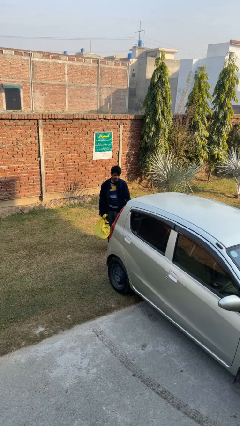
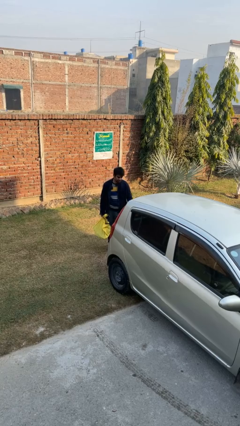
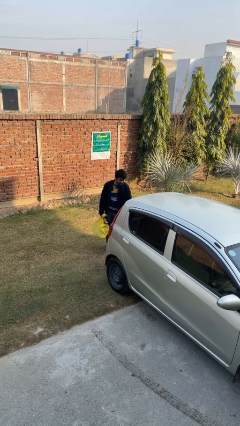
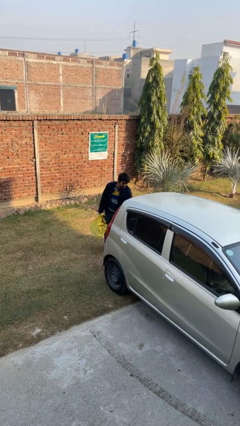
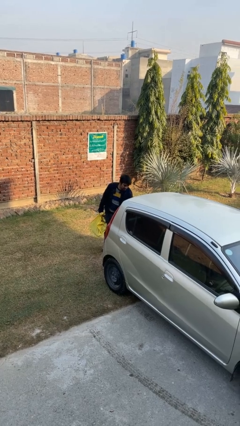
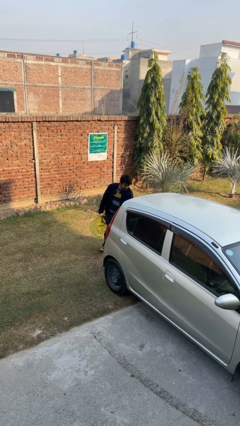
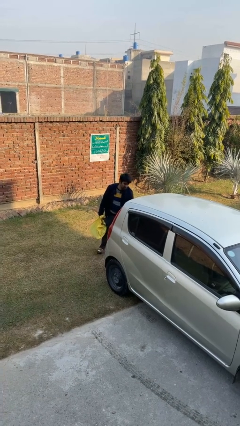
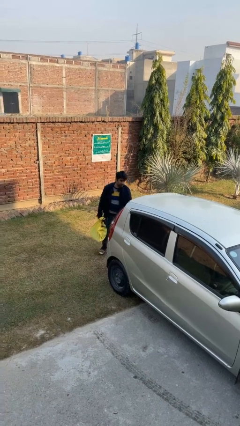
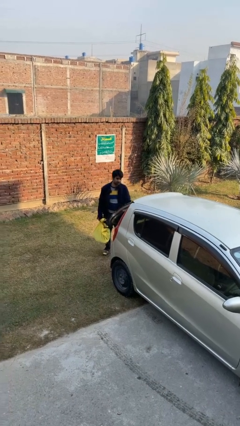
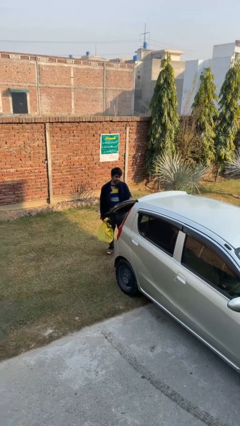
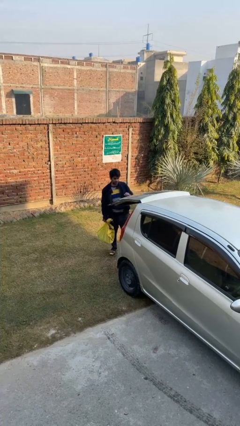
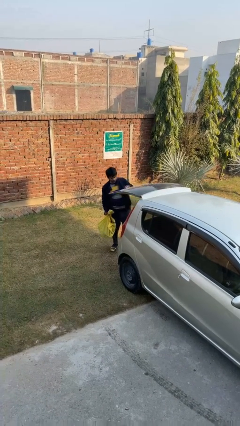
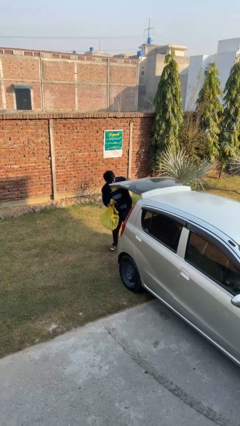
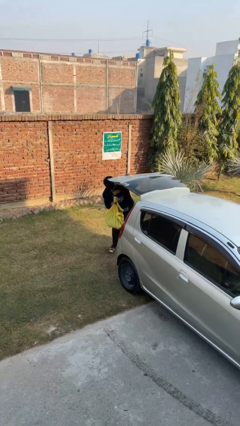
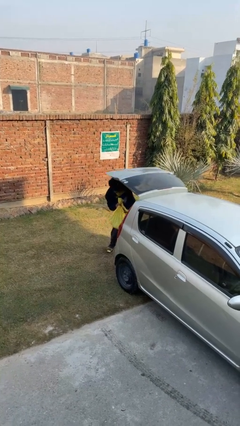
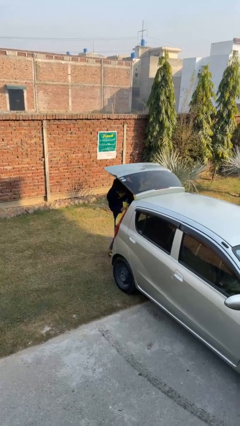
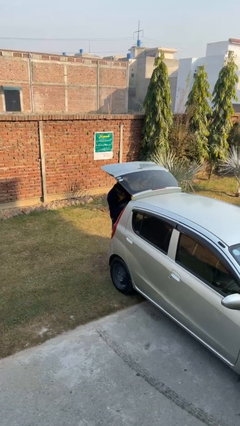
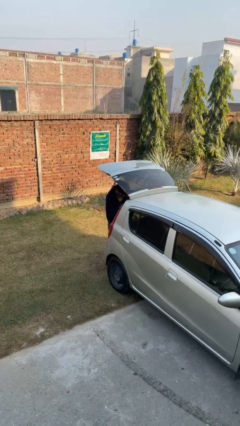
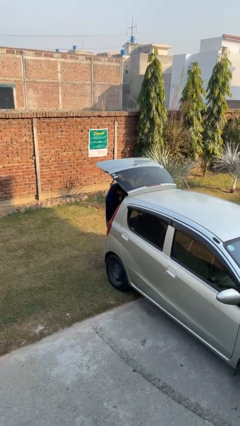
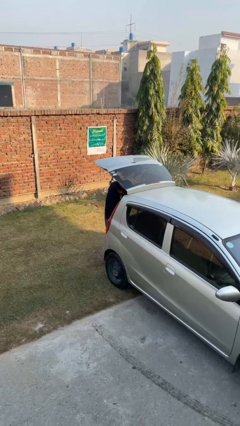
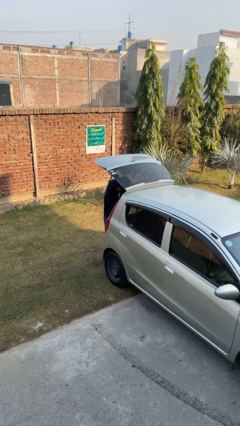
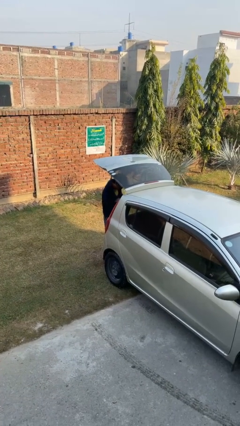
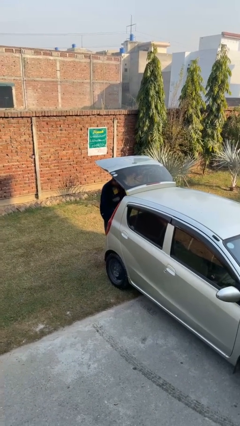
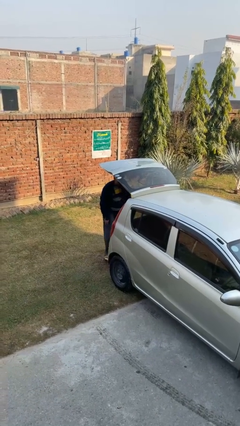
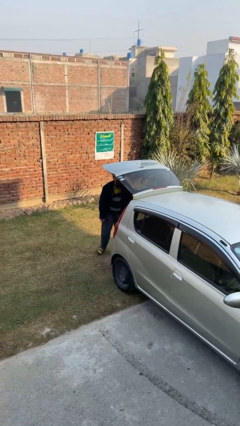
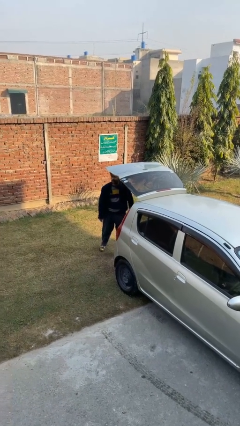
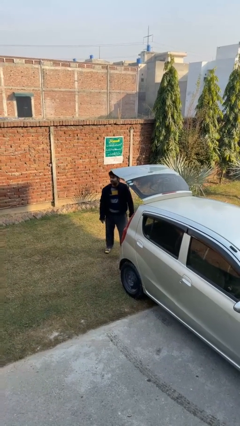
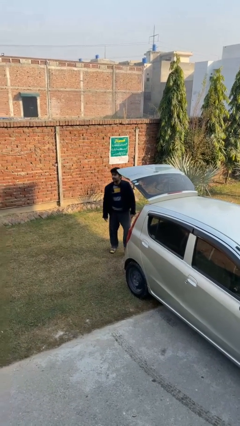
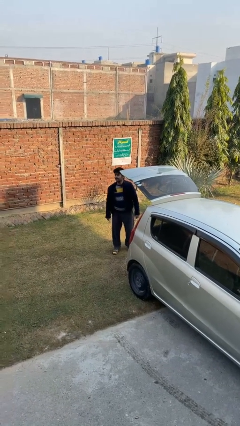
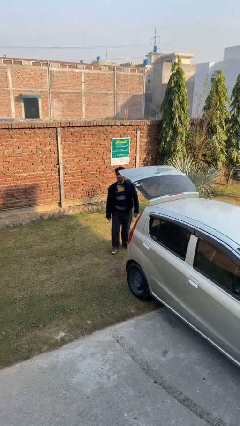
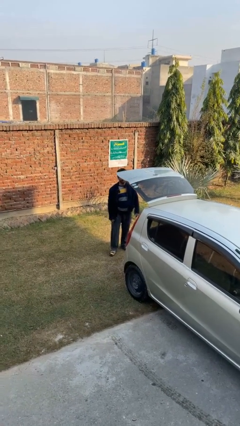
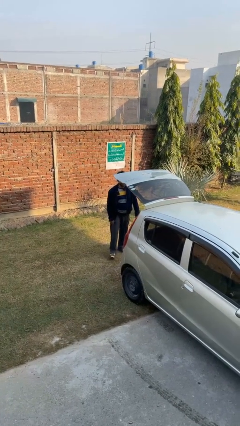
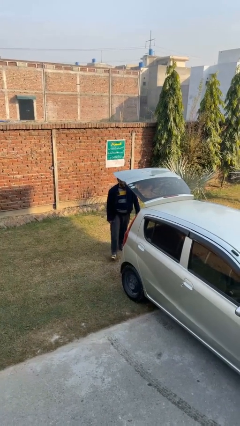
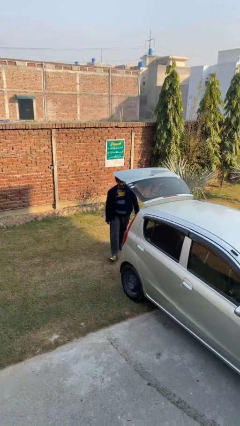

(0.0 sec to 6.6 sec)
person loads car

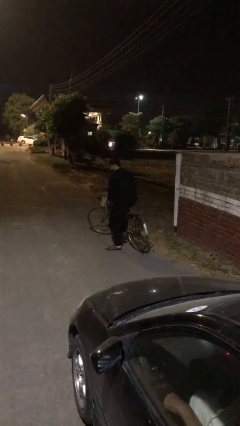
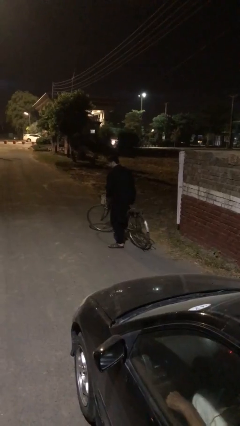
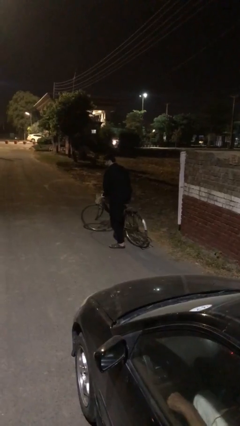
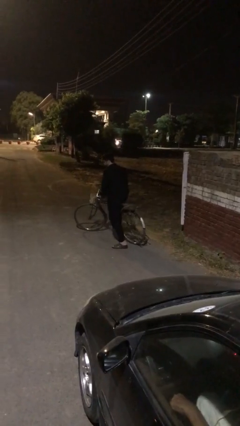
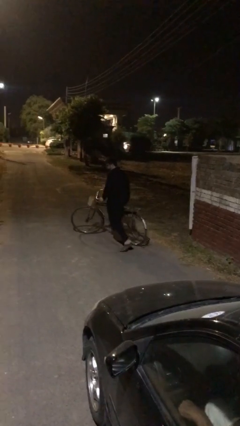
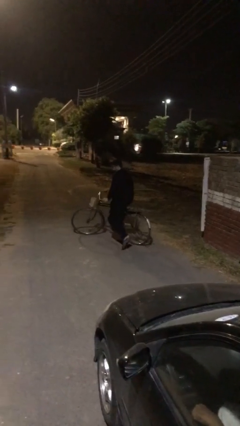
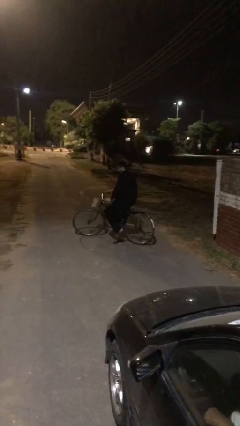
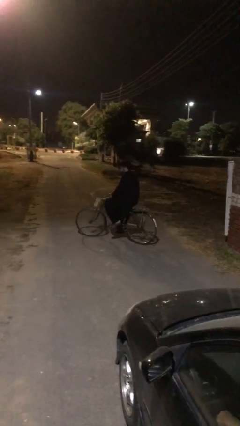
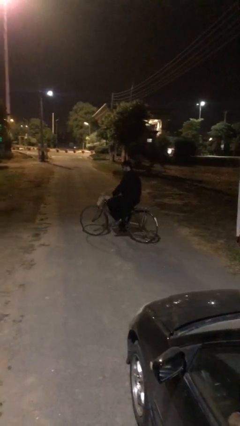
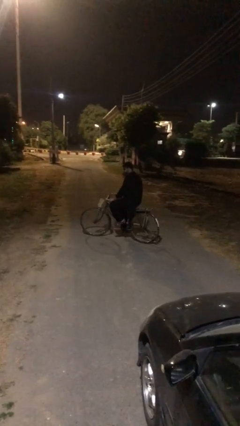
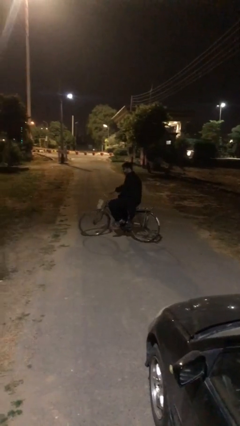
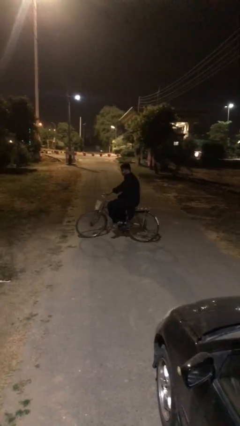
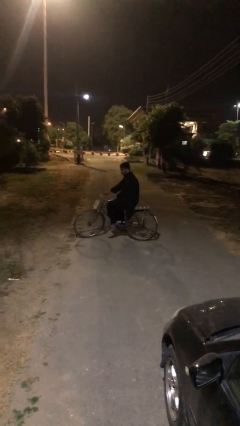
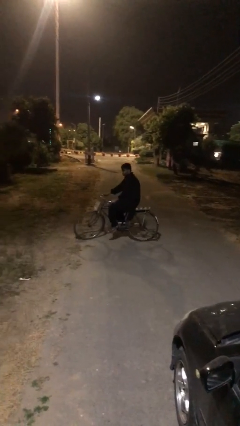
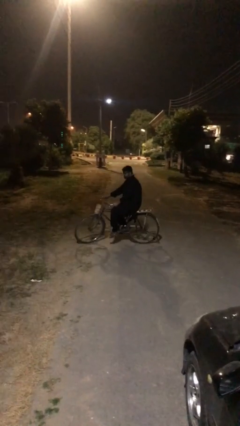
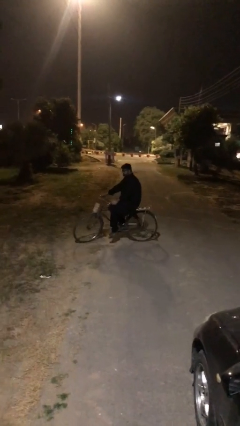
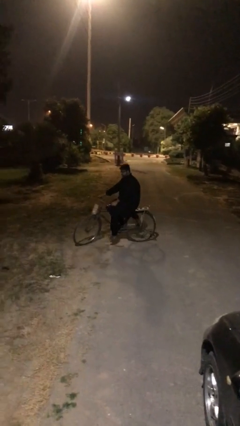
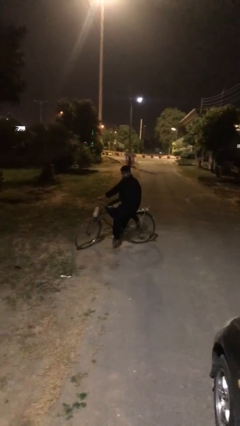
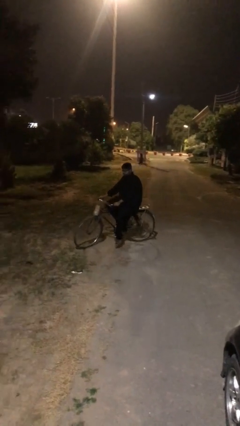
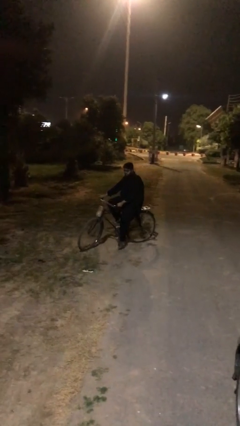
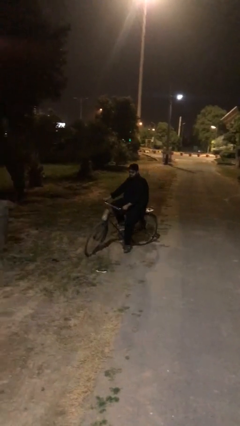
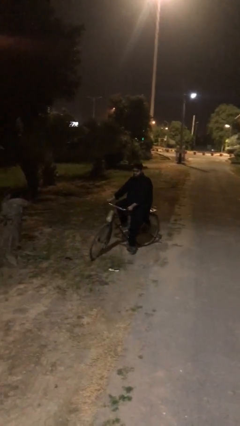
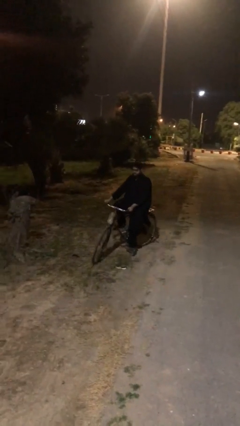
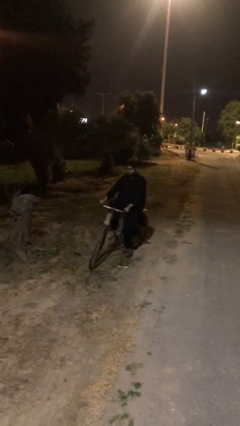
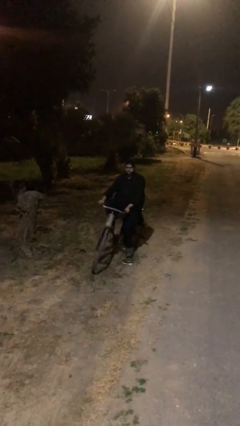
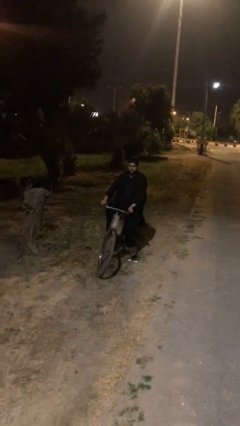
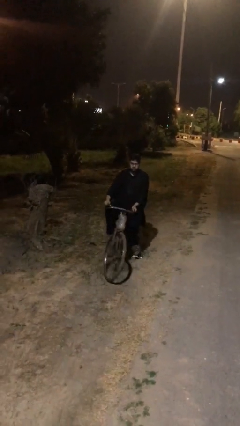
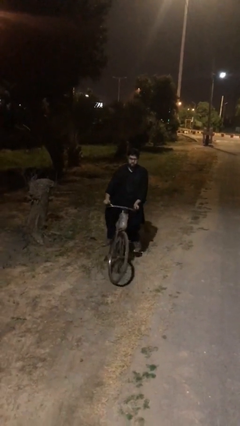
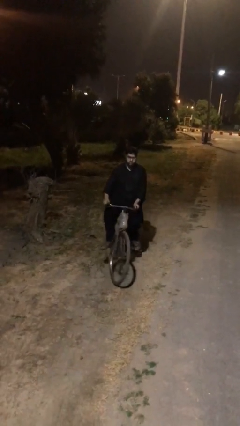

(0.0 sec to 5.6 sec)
person rides bicycle

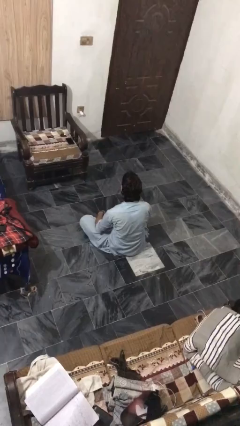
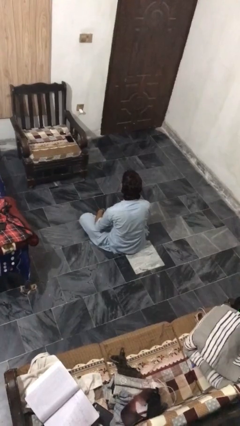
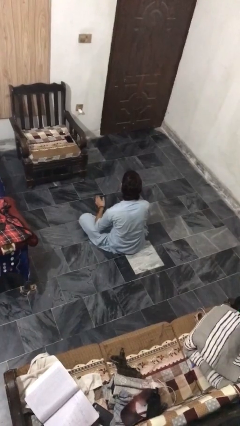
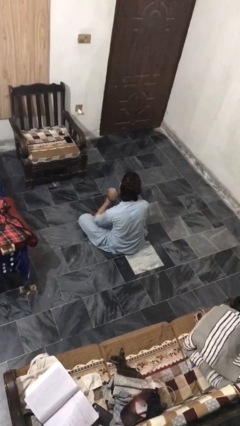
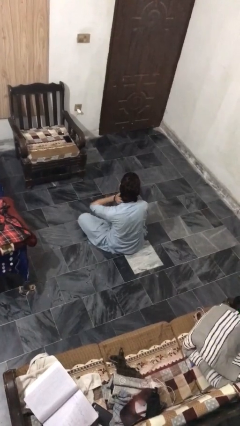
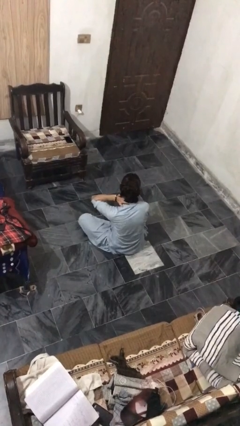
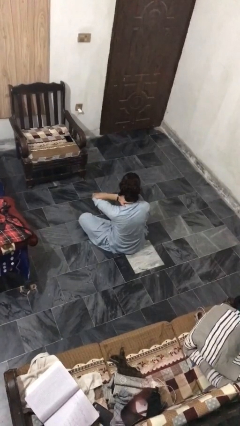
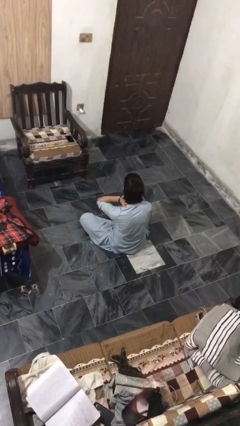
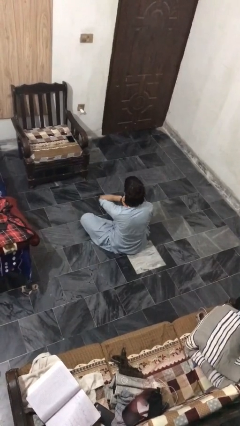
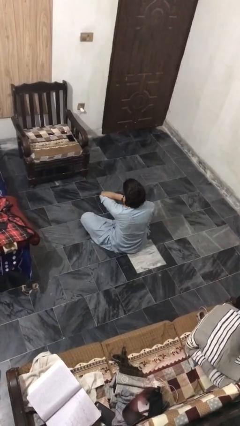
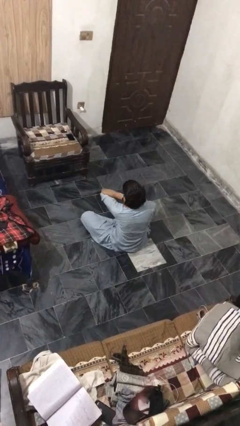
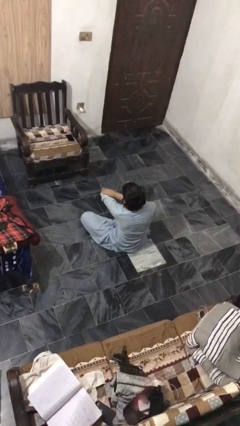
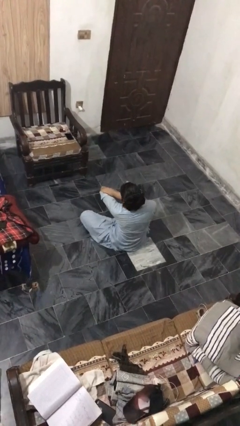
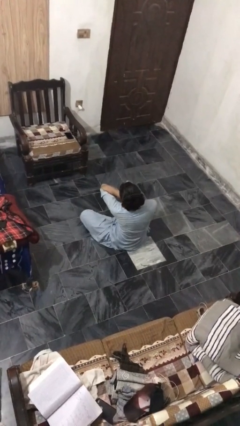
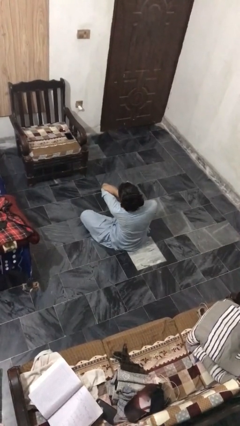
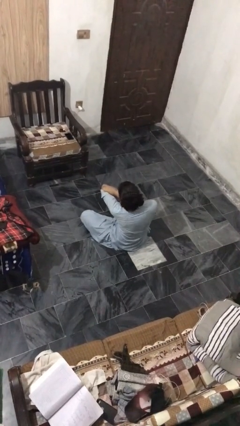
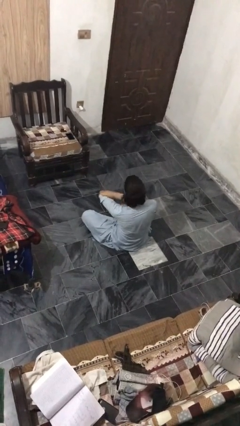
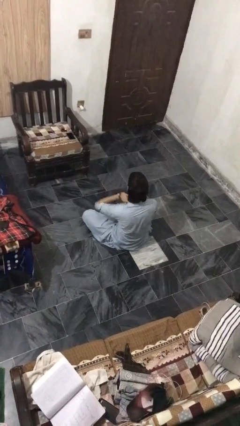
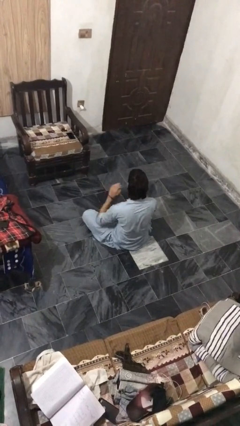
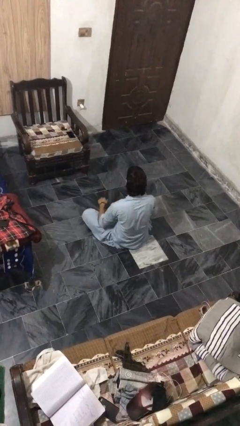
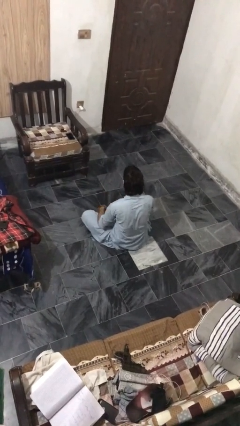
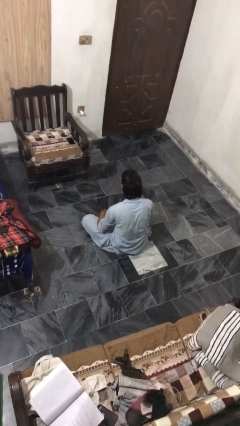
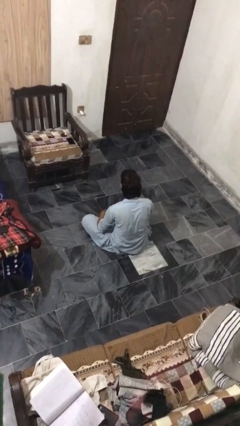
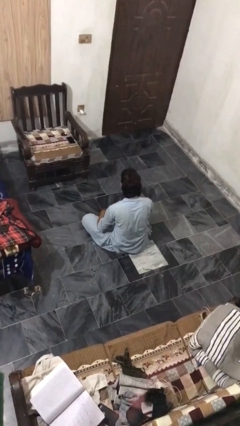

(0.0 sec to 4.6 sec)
person rubs neck

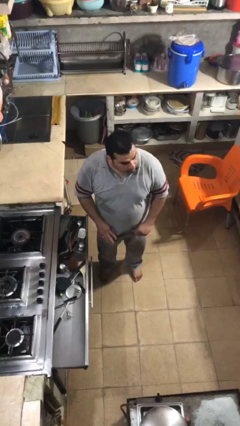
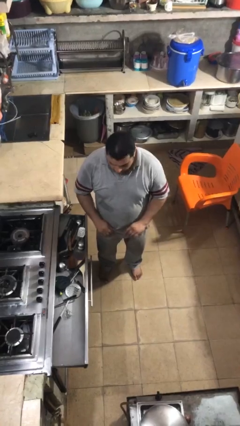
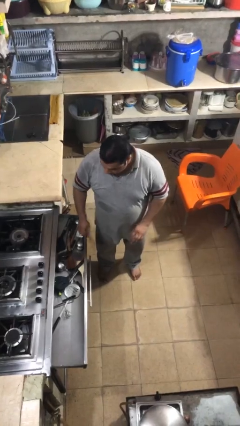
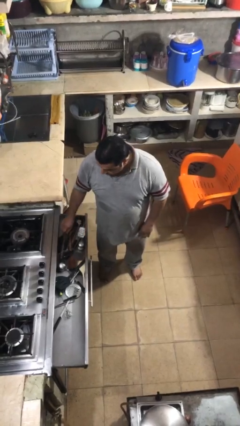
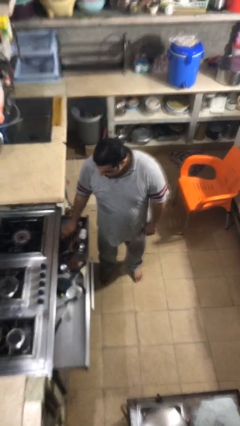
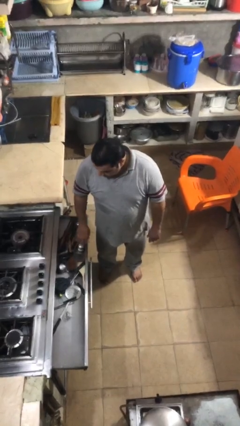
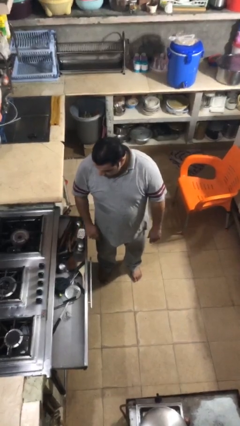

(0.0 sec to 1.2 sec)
person puts object into kitchen drawer
